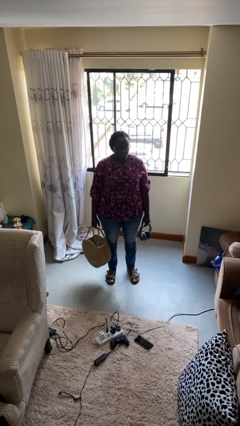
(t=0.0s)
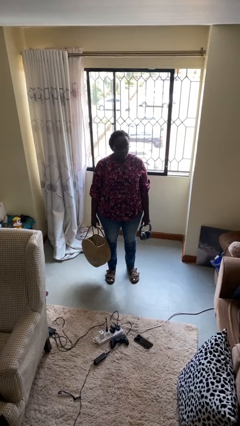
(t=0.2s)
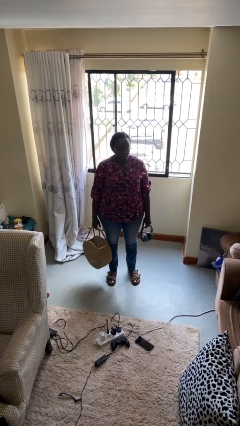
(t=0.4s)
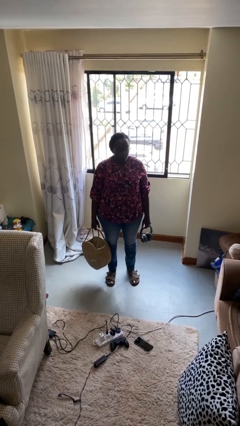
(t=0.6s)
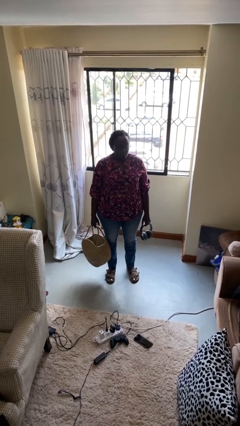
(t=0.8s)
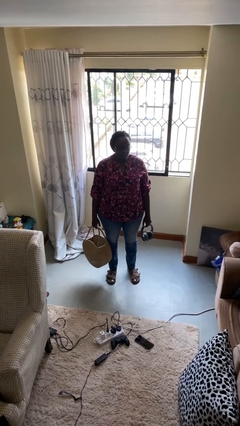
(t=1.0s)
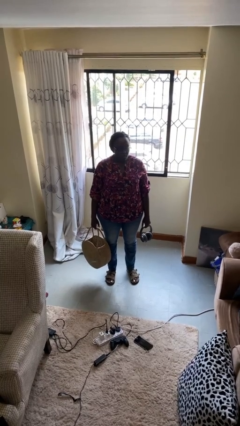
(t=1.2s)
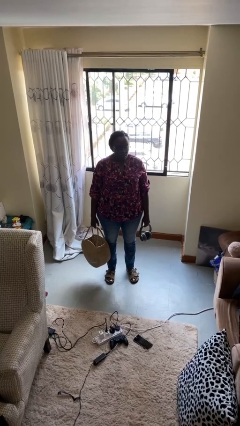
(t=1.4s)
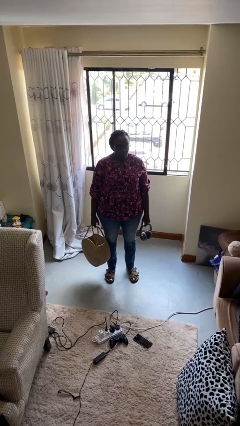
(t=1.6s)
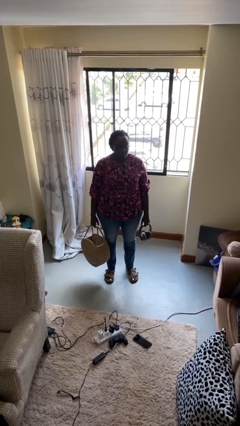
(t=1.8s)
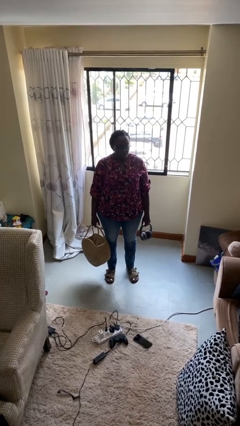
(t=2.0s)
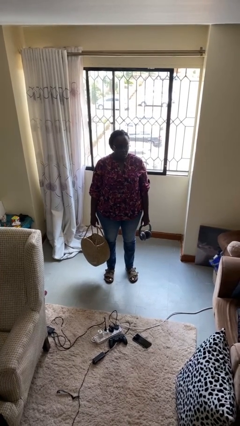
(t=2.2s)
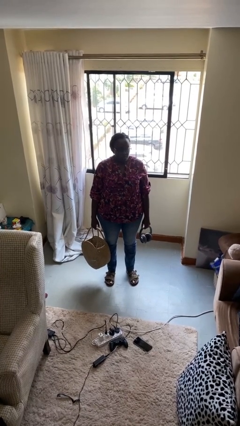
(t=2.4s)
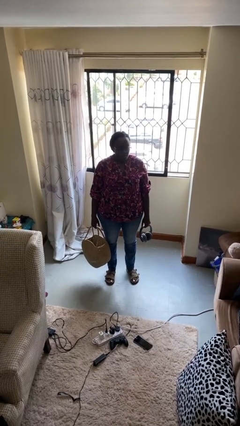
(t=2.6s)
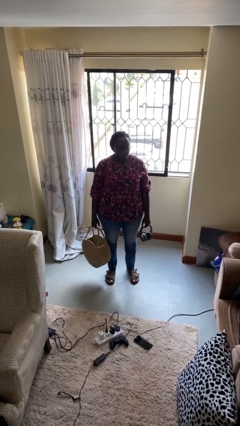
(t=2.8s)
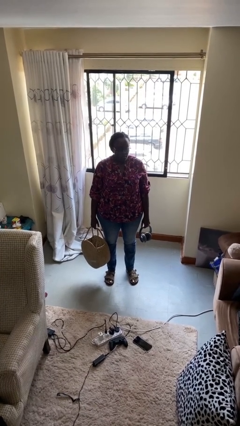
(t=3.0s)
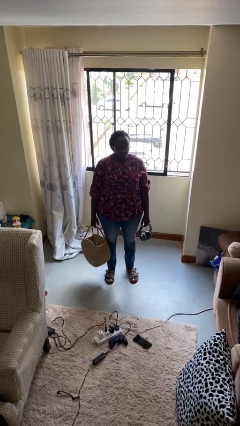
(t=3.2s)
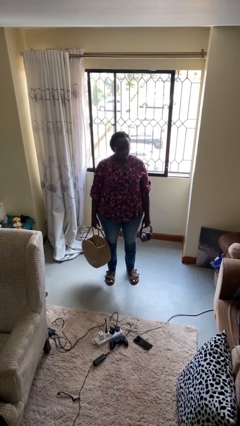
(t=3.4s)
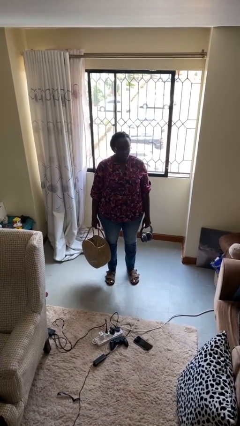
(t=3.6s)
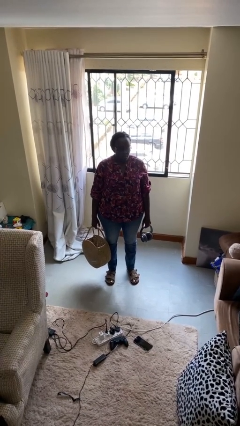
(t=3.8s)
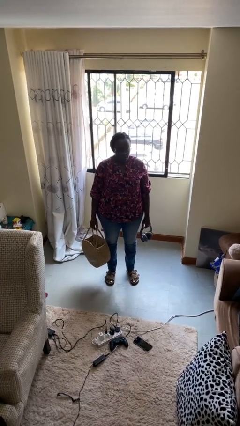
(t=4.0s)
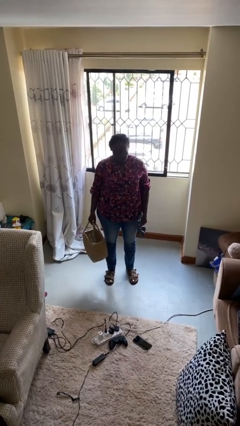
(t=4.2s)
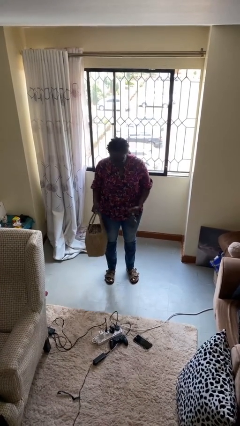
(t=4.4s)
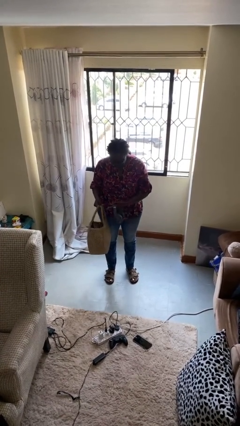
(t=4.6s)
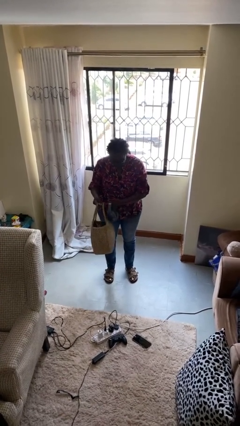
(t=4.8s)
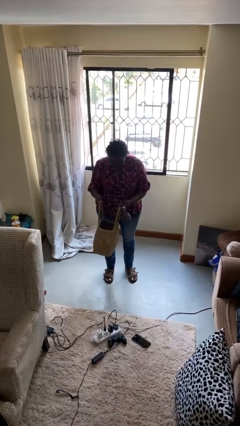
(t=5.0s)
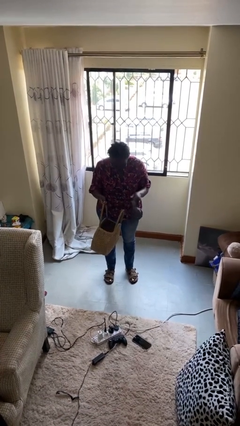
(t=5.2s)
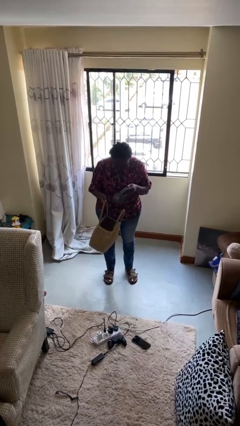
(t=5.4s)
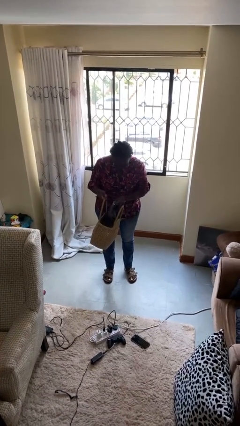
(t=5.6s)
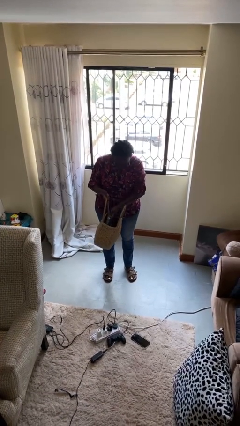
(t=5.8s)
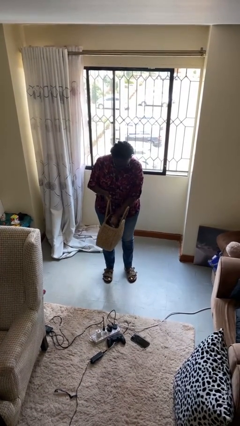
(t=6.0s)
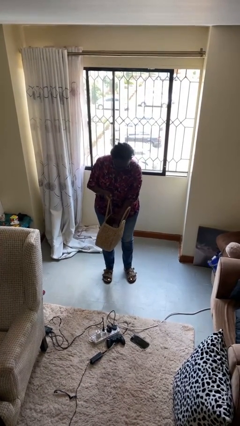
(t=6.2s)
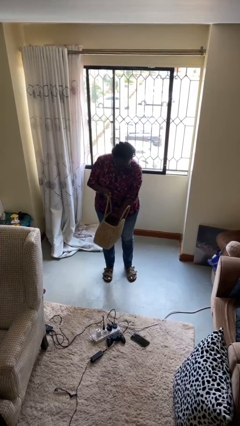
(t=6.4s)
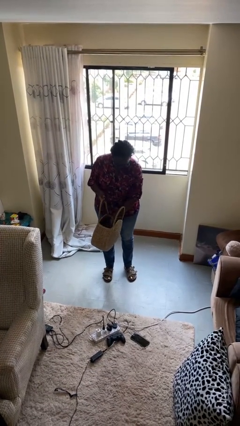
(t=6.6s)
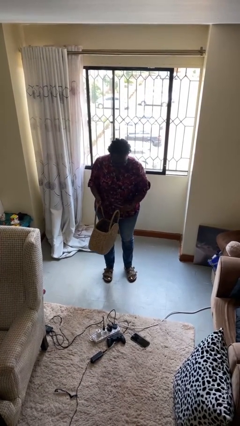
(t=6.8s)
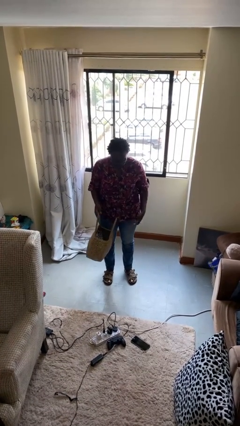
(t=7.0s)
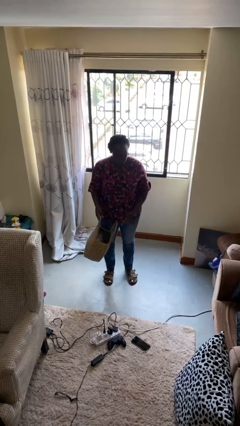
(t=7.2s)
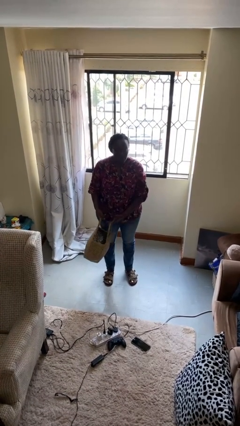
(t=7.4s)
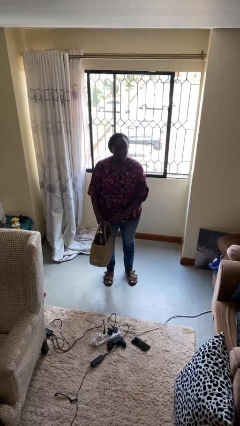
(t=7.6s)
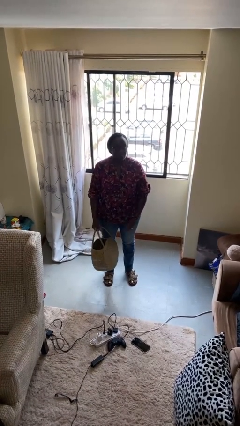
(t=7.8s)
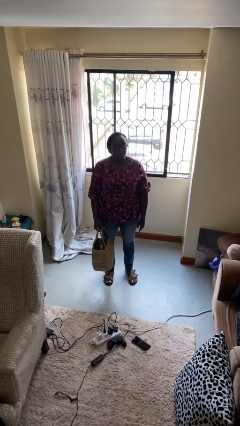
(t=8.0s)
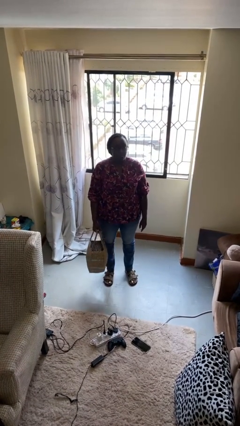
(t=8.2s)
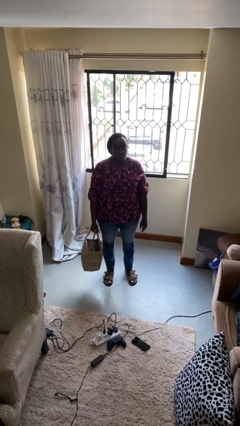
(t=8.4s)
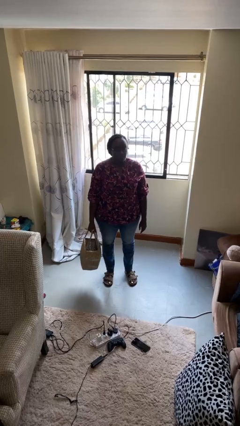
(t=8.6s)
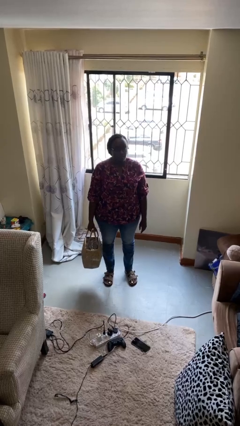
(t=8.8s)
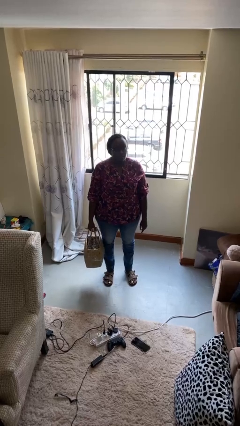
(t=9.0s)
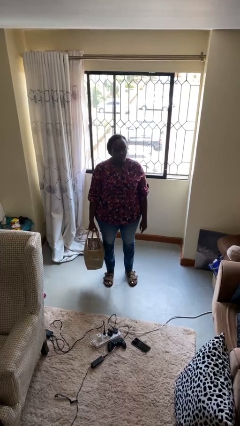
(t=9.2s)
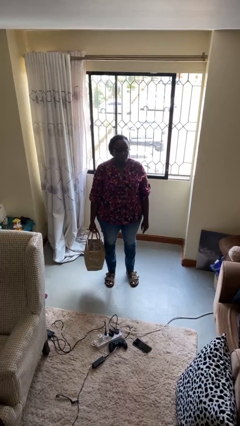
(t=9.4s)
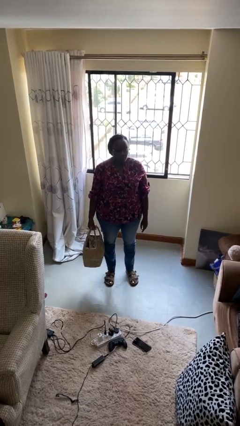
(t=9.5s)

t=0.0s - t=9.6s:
person puts object into basket

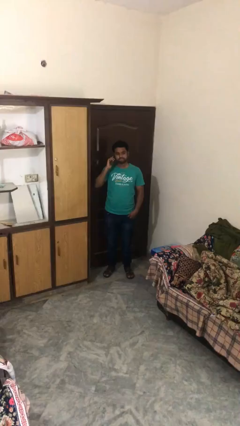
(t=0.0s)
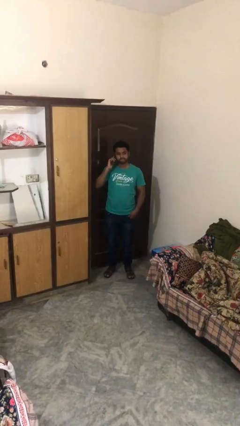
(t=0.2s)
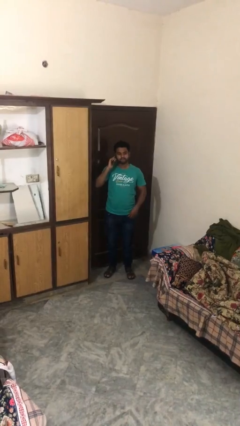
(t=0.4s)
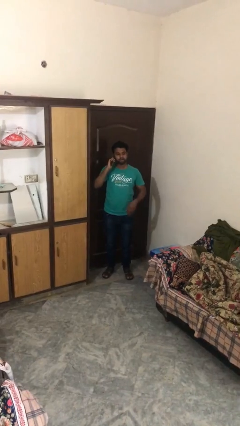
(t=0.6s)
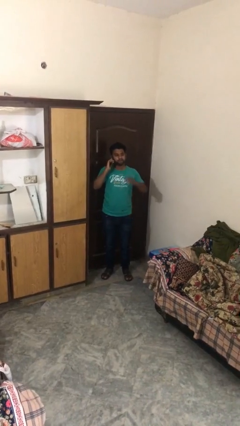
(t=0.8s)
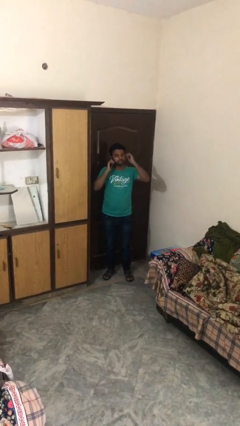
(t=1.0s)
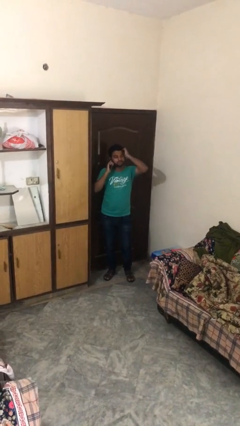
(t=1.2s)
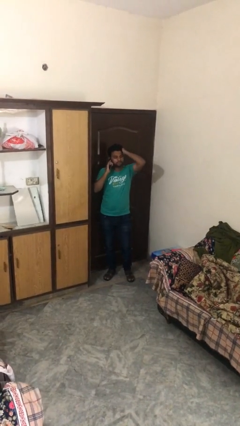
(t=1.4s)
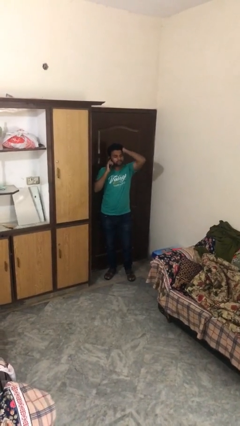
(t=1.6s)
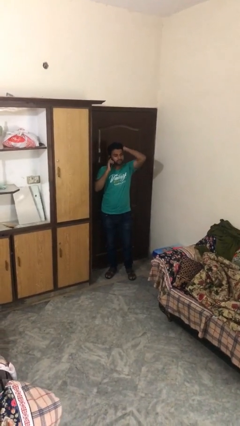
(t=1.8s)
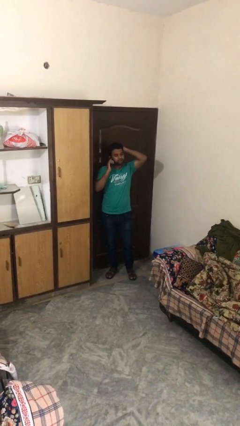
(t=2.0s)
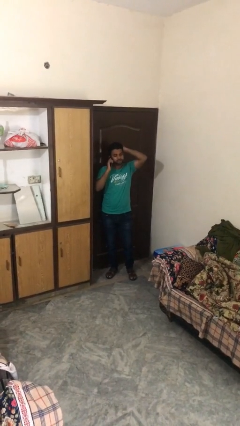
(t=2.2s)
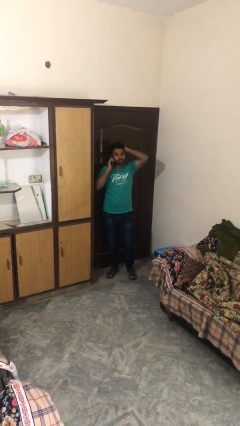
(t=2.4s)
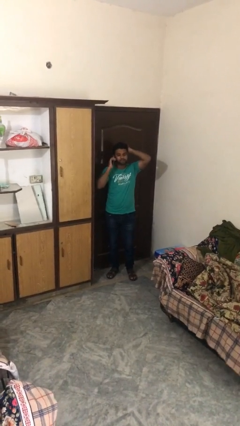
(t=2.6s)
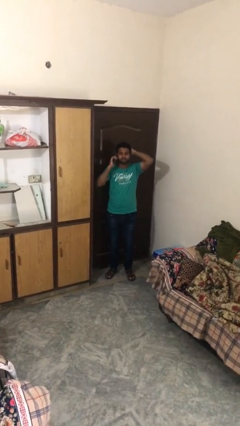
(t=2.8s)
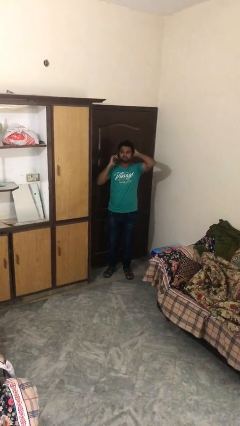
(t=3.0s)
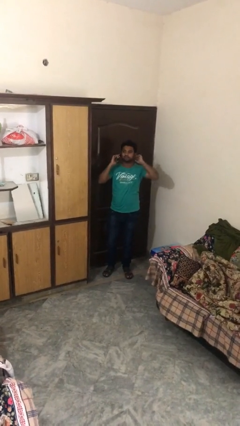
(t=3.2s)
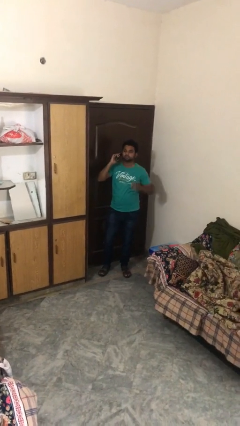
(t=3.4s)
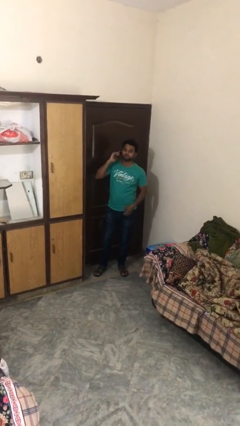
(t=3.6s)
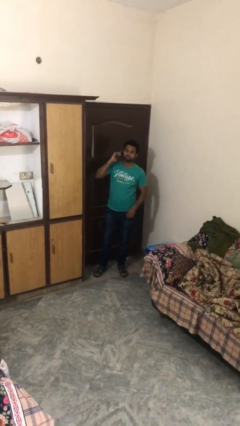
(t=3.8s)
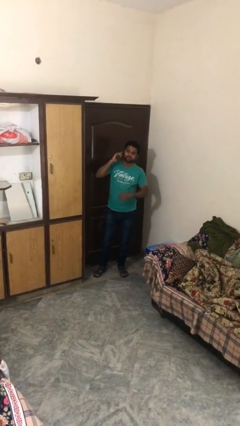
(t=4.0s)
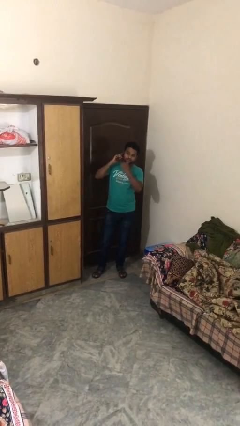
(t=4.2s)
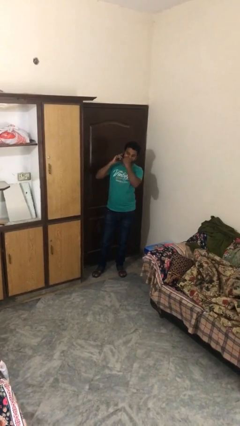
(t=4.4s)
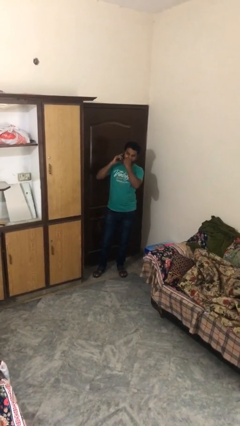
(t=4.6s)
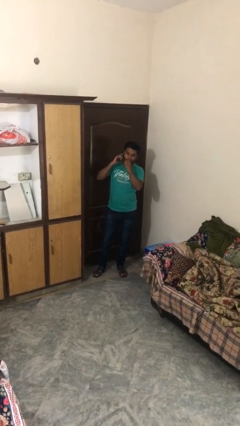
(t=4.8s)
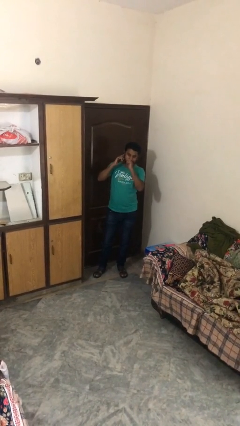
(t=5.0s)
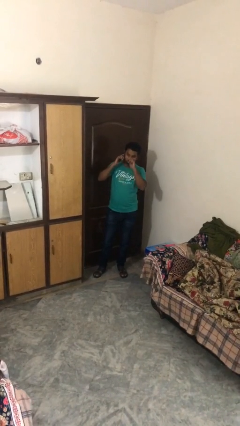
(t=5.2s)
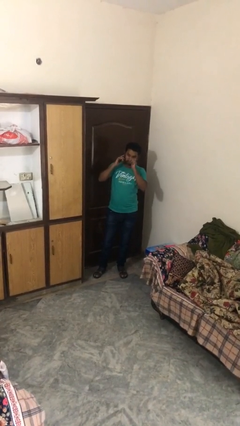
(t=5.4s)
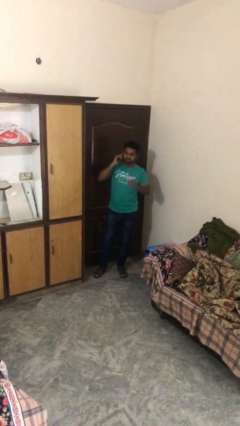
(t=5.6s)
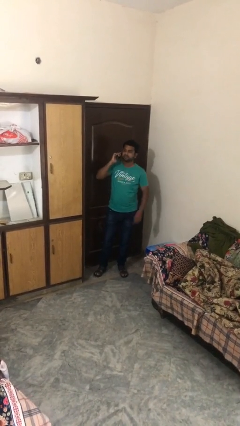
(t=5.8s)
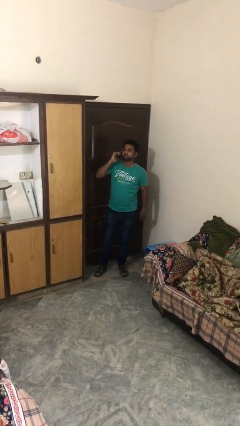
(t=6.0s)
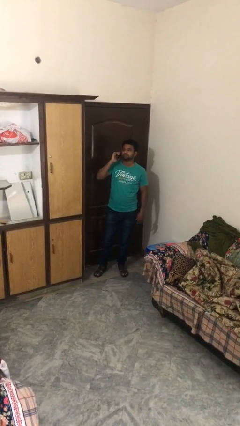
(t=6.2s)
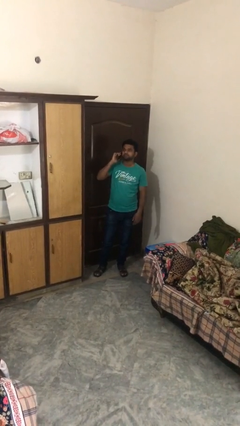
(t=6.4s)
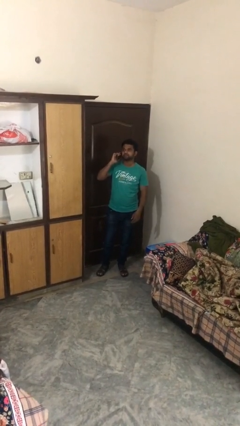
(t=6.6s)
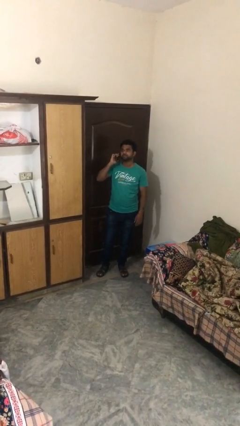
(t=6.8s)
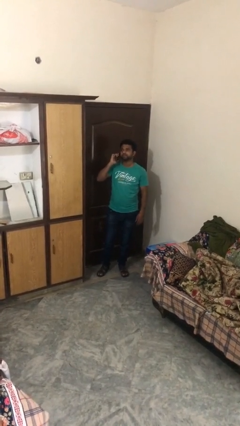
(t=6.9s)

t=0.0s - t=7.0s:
person talks on phone

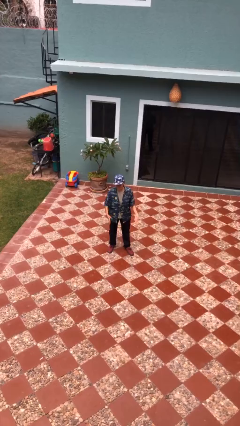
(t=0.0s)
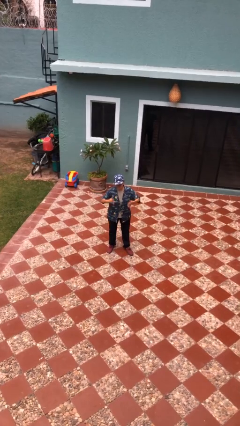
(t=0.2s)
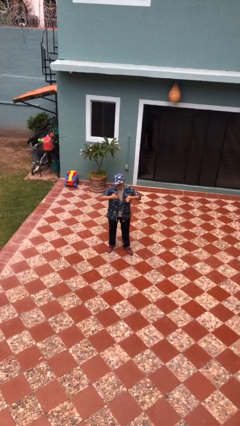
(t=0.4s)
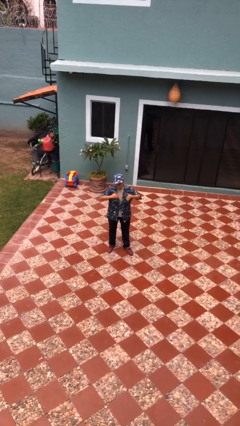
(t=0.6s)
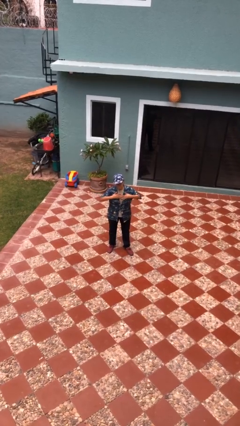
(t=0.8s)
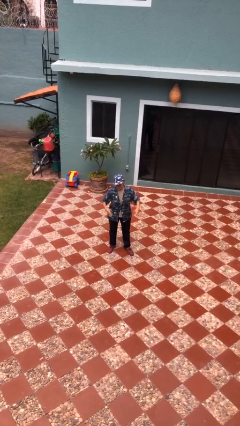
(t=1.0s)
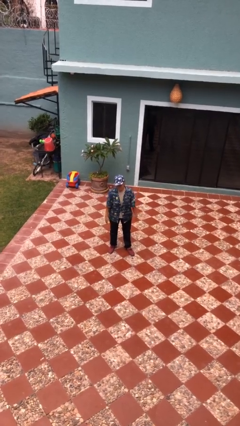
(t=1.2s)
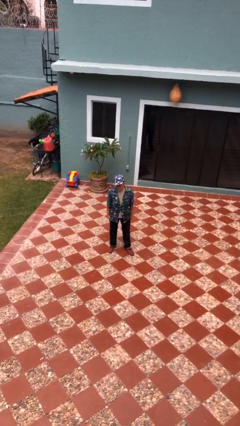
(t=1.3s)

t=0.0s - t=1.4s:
person drums on chest
